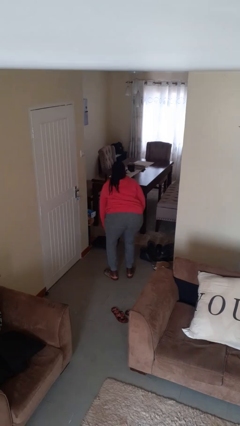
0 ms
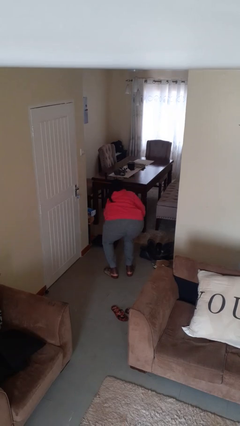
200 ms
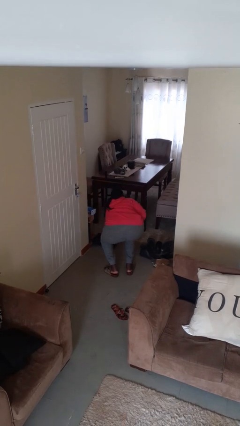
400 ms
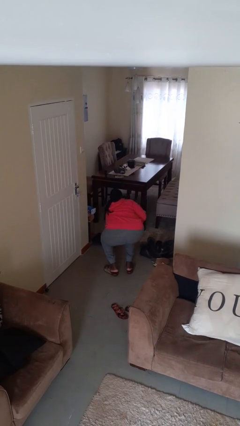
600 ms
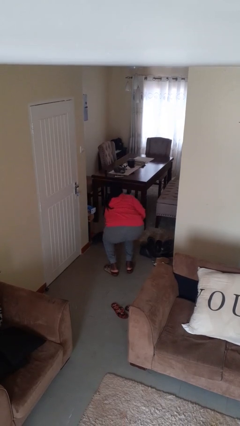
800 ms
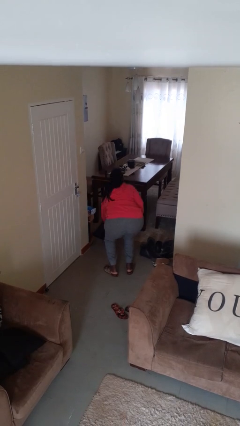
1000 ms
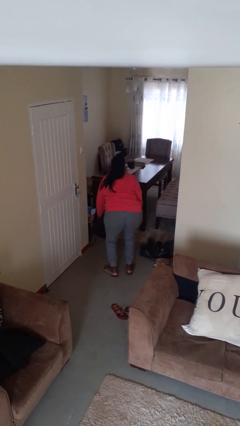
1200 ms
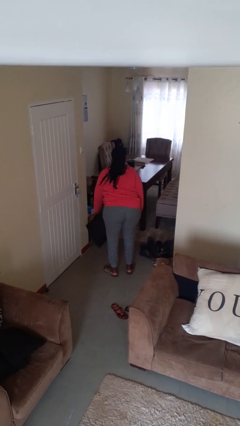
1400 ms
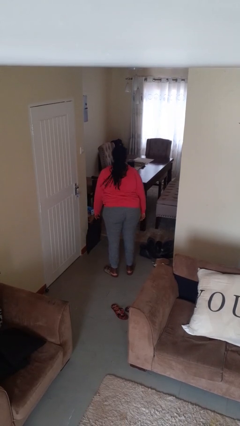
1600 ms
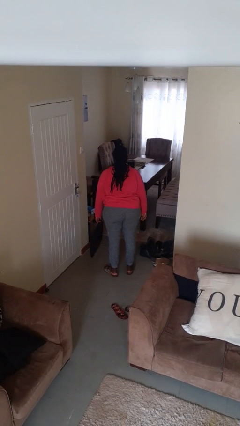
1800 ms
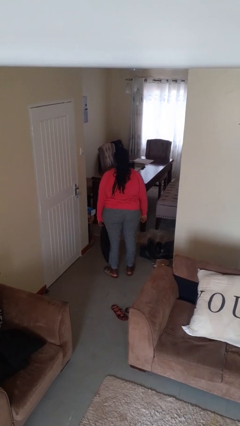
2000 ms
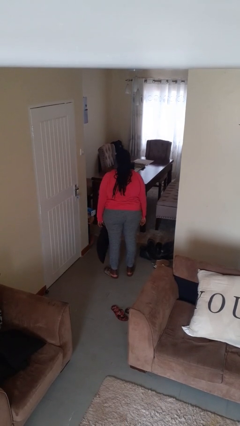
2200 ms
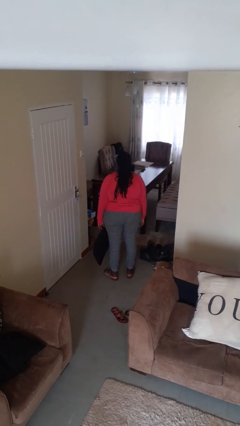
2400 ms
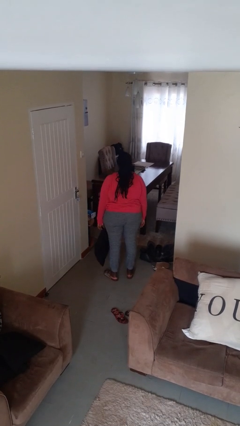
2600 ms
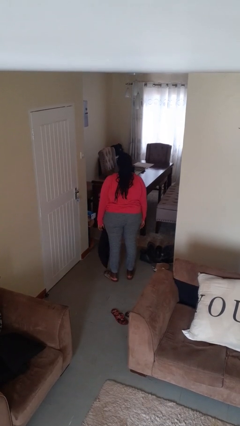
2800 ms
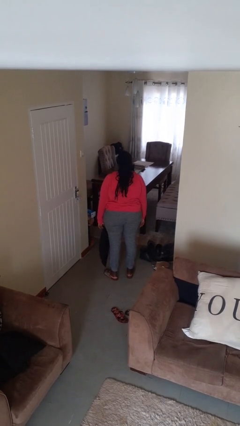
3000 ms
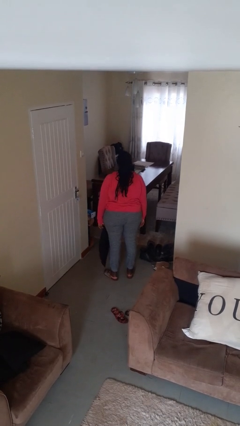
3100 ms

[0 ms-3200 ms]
person picks up object from floor

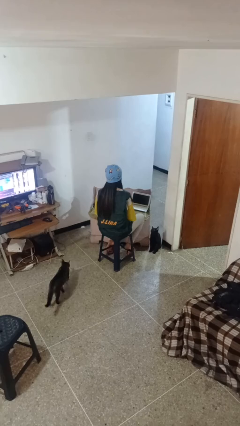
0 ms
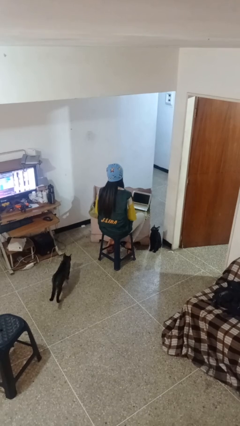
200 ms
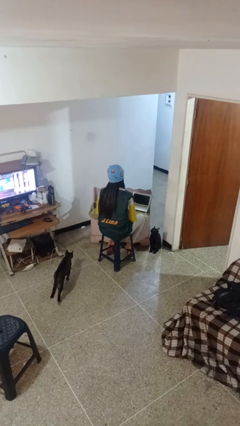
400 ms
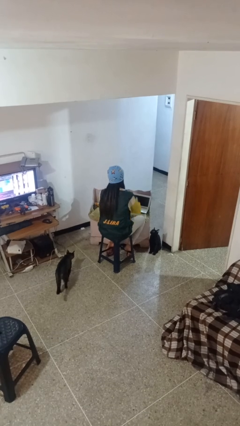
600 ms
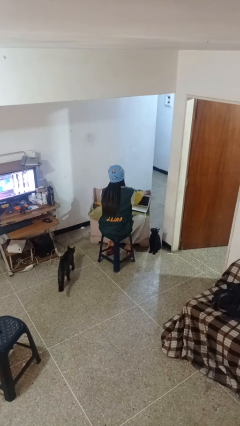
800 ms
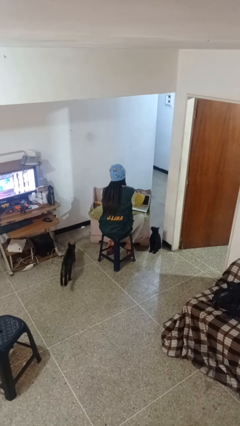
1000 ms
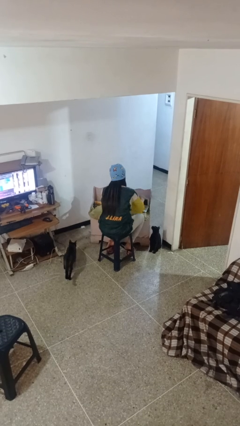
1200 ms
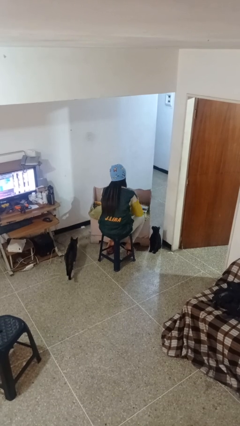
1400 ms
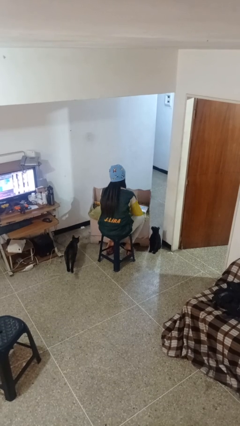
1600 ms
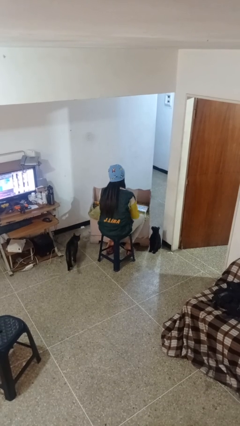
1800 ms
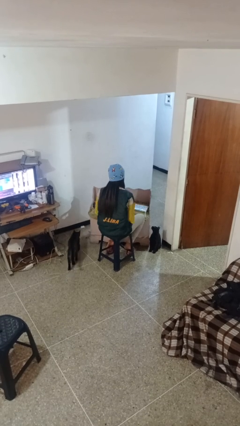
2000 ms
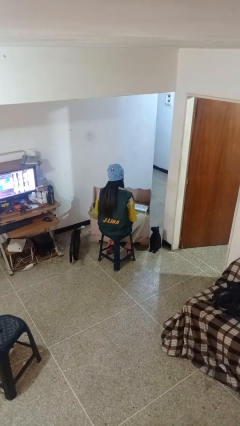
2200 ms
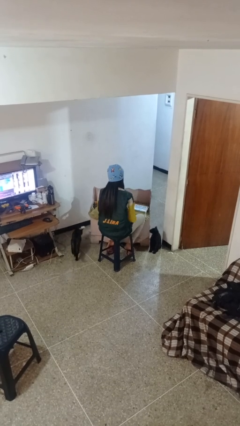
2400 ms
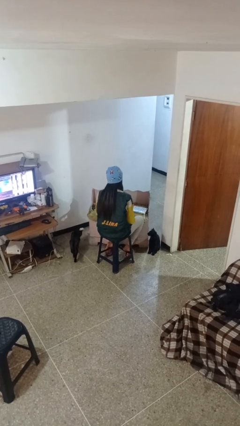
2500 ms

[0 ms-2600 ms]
person closes laptop

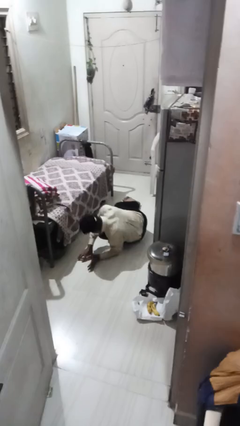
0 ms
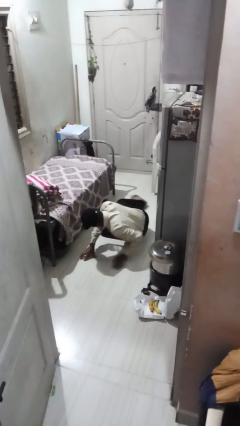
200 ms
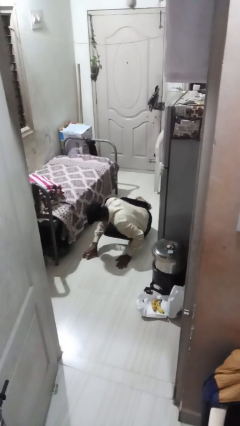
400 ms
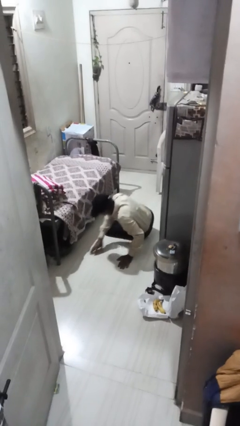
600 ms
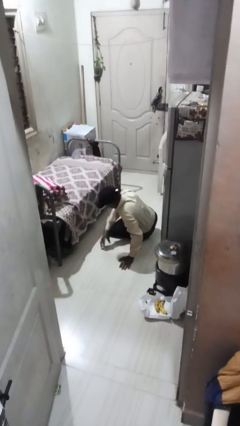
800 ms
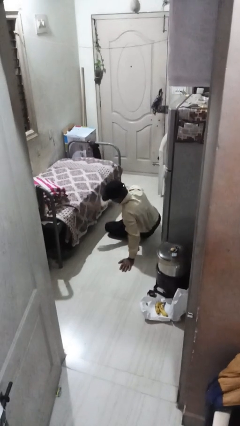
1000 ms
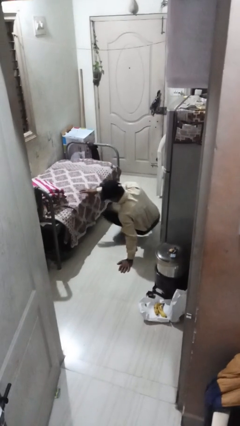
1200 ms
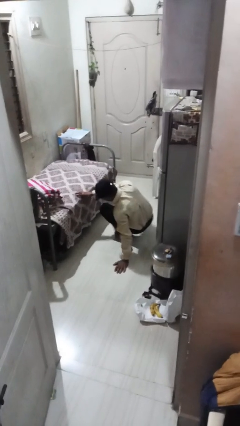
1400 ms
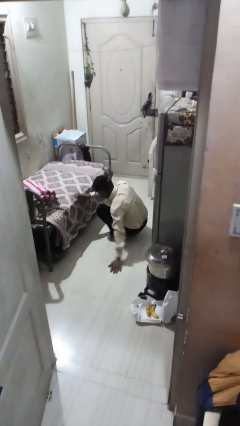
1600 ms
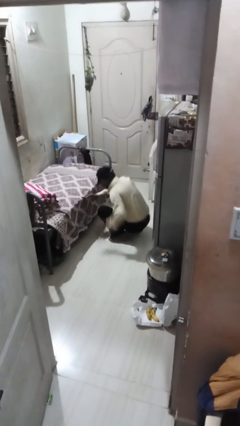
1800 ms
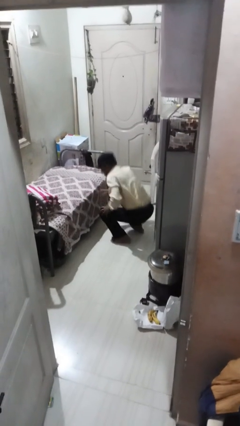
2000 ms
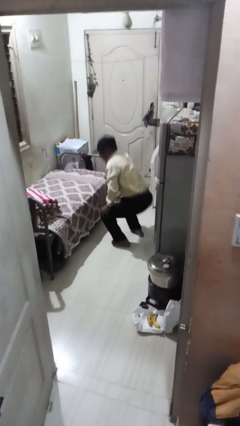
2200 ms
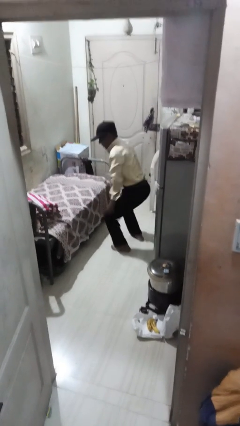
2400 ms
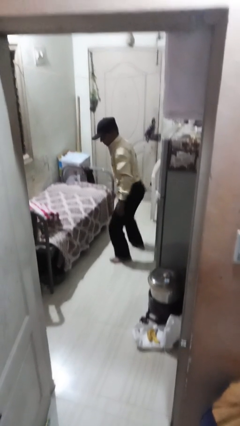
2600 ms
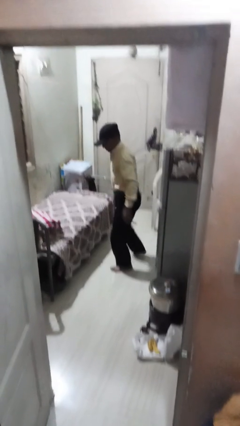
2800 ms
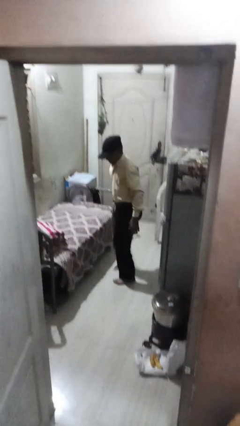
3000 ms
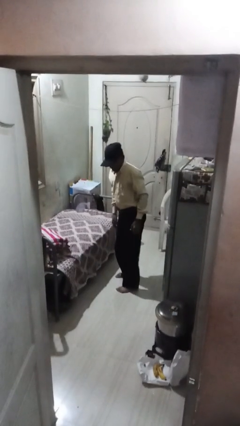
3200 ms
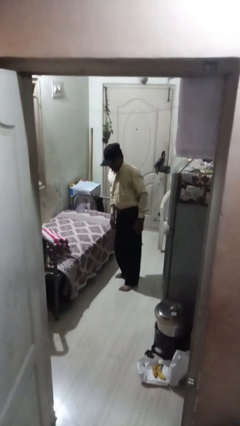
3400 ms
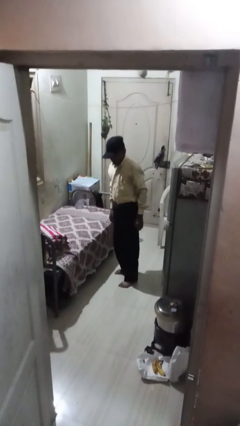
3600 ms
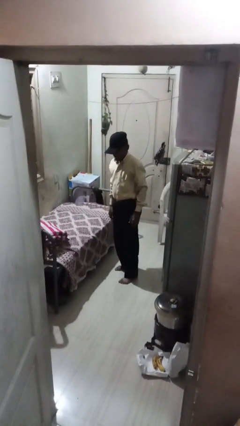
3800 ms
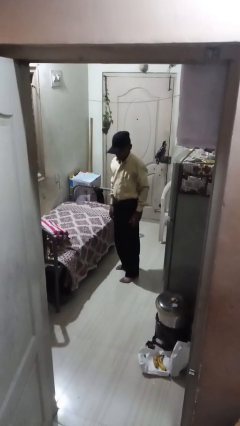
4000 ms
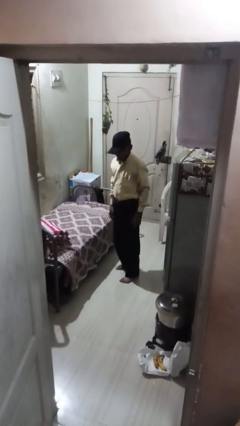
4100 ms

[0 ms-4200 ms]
person stands up from floor

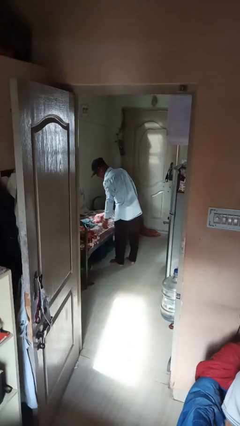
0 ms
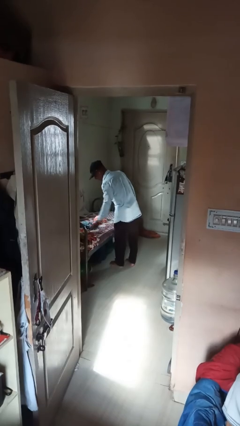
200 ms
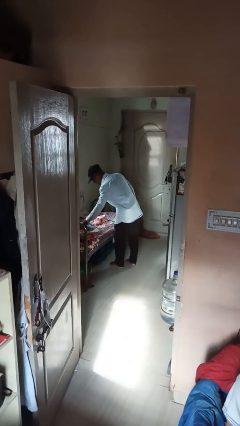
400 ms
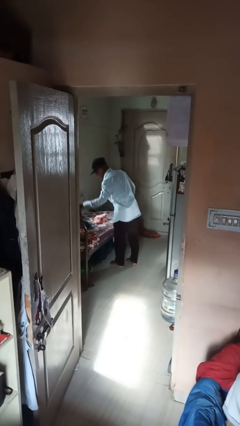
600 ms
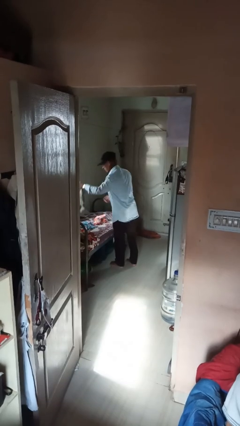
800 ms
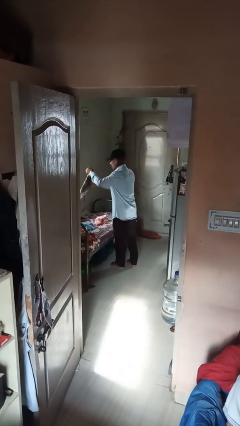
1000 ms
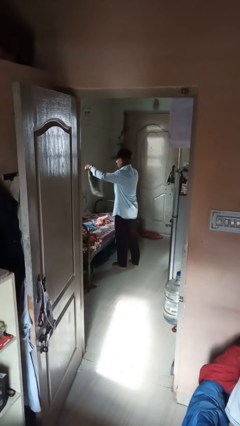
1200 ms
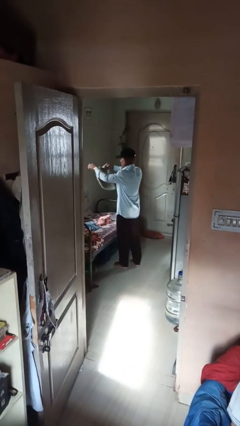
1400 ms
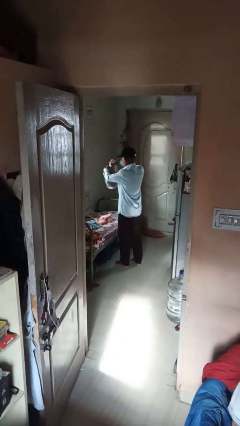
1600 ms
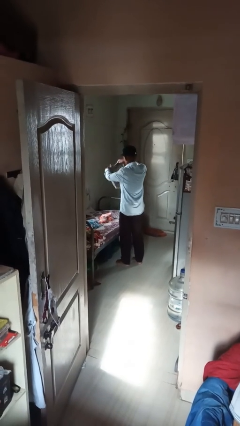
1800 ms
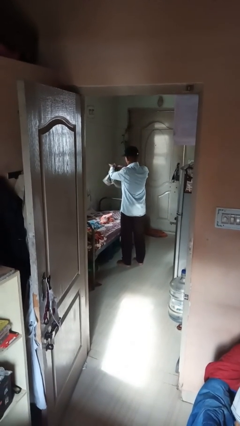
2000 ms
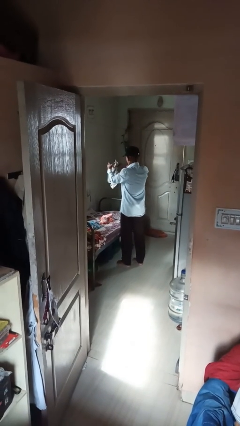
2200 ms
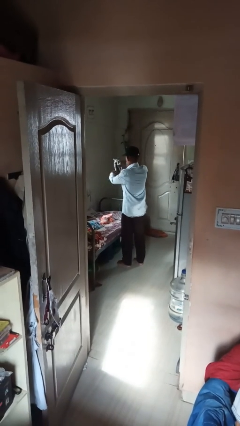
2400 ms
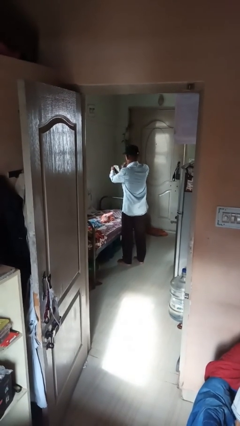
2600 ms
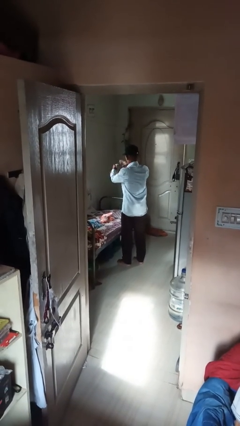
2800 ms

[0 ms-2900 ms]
person folds towel

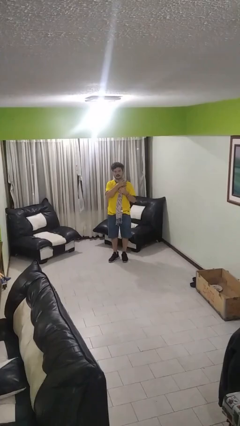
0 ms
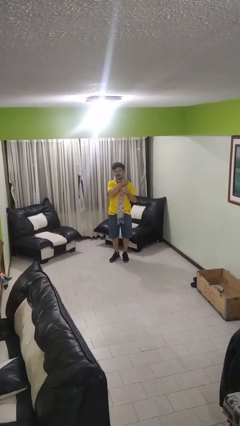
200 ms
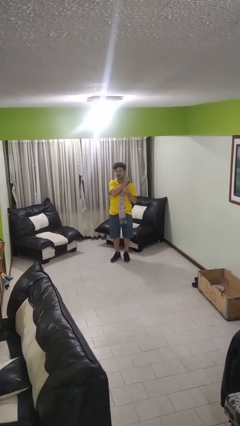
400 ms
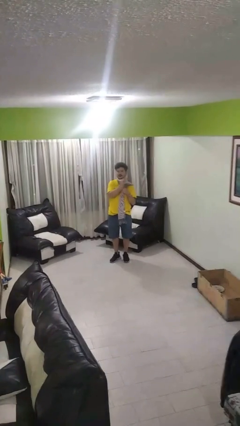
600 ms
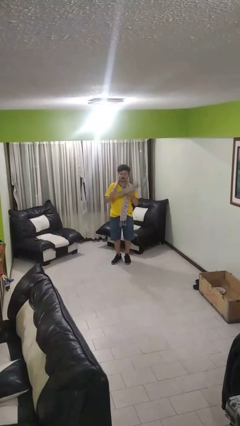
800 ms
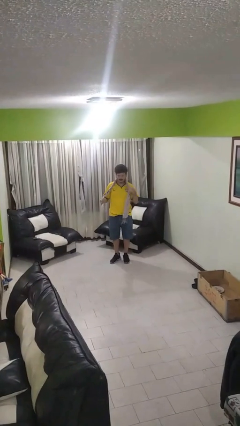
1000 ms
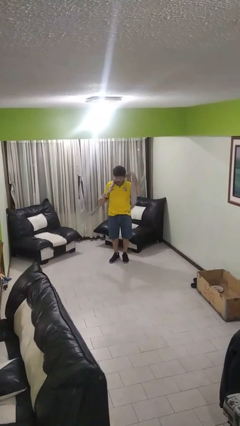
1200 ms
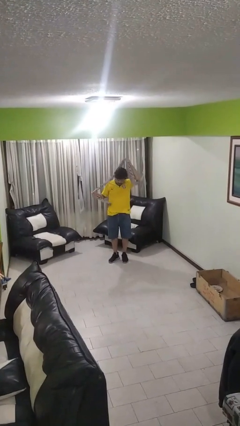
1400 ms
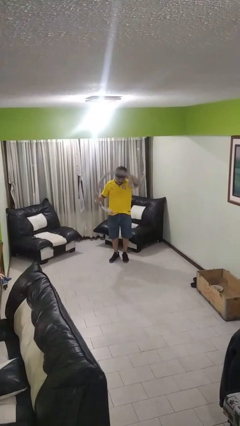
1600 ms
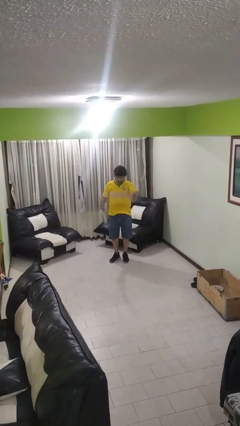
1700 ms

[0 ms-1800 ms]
person takes off scarf

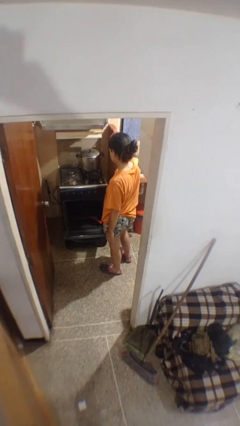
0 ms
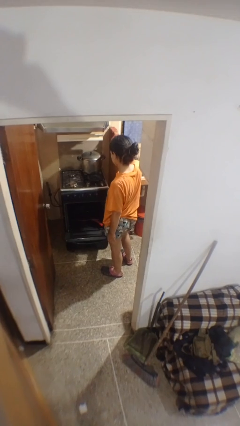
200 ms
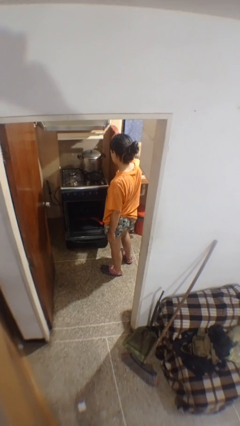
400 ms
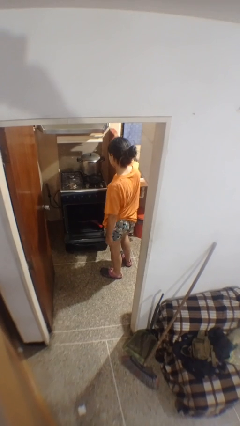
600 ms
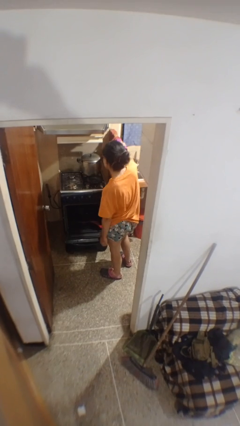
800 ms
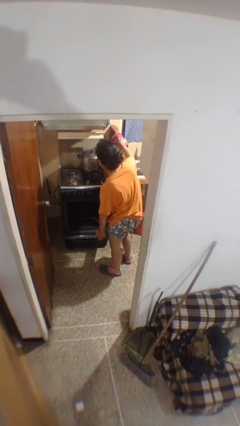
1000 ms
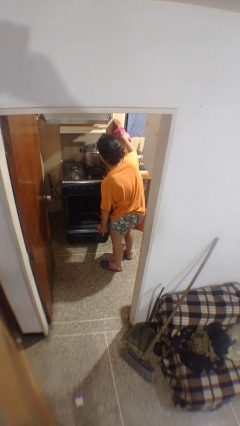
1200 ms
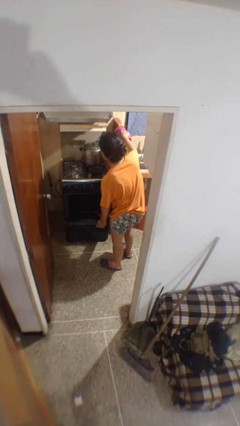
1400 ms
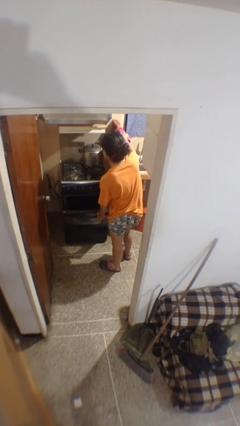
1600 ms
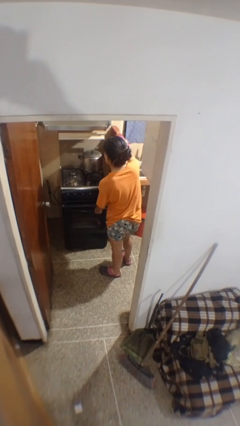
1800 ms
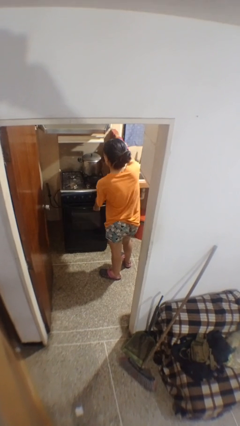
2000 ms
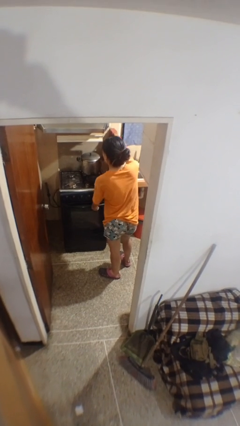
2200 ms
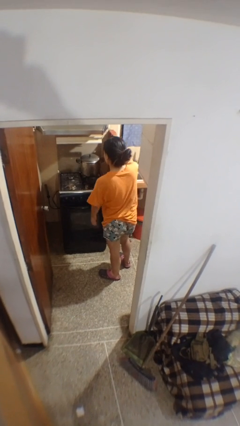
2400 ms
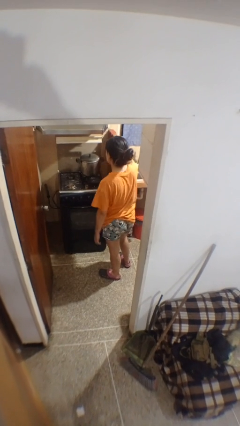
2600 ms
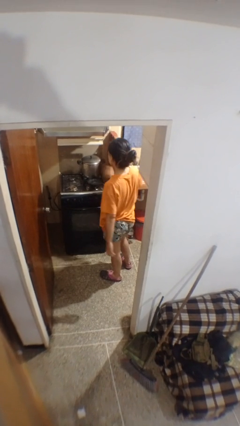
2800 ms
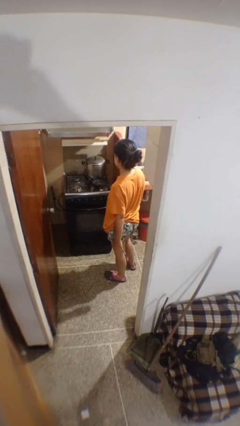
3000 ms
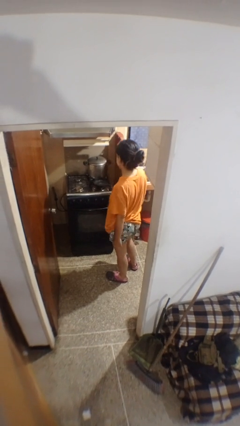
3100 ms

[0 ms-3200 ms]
person closes oven door
